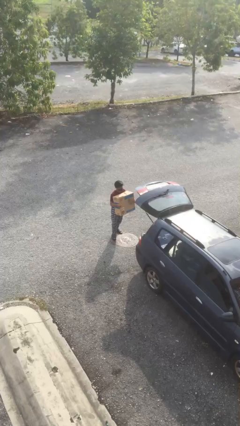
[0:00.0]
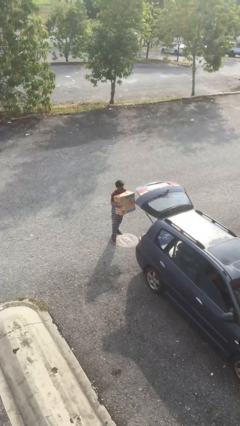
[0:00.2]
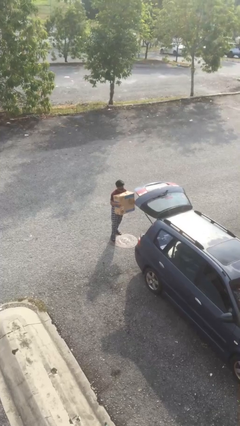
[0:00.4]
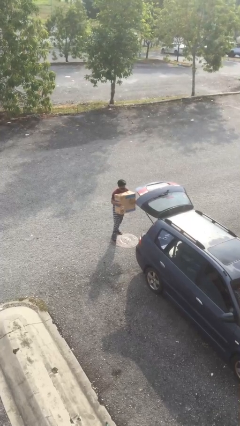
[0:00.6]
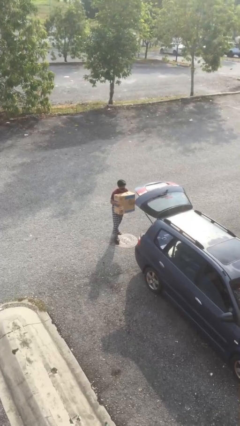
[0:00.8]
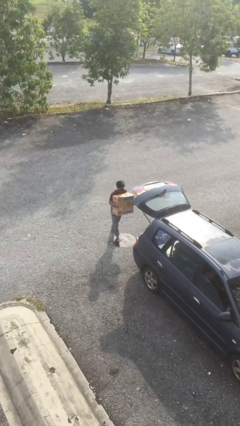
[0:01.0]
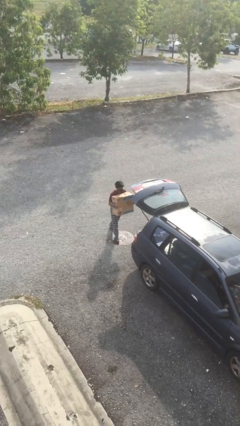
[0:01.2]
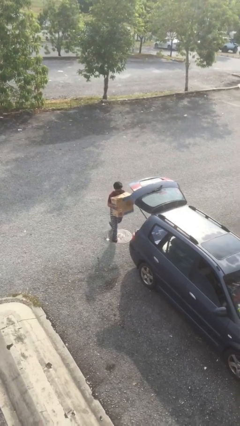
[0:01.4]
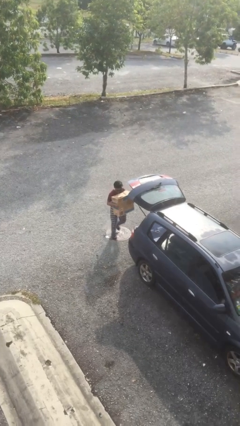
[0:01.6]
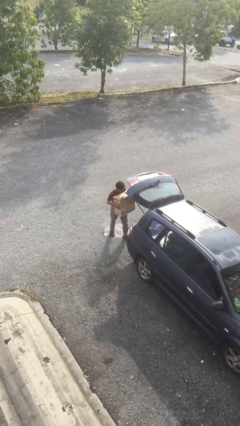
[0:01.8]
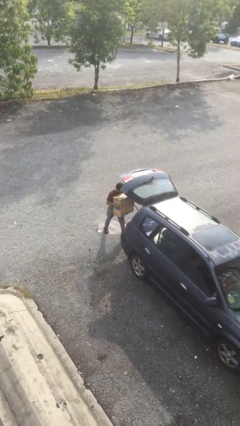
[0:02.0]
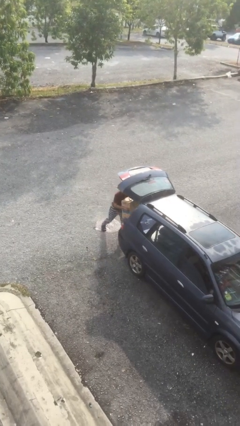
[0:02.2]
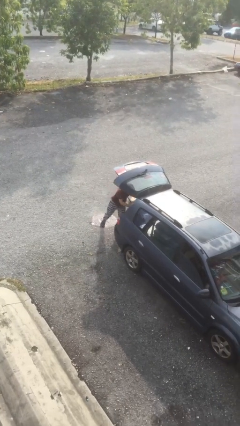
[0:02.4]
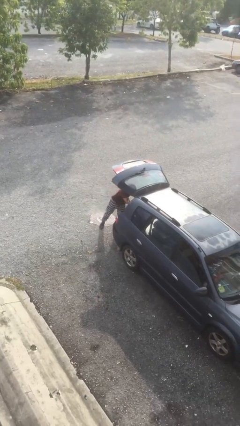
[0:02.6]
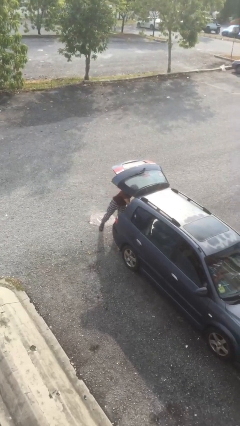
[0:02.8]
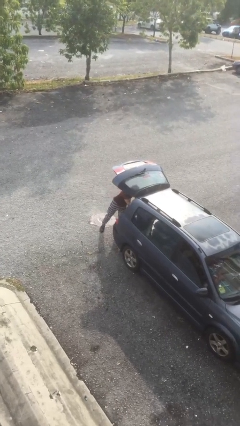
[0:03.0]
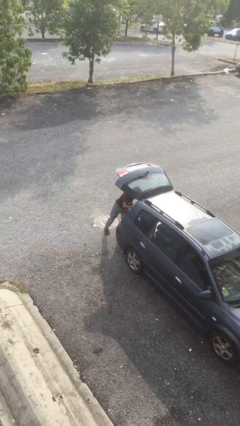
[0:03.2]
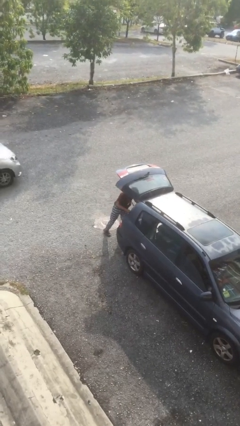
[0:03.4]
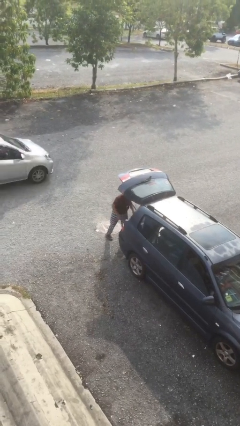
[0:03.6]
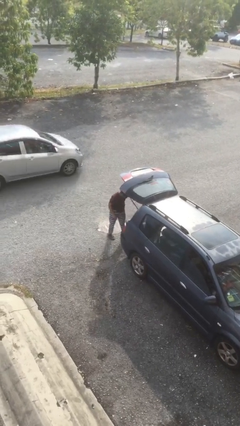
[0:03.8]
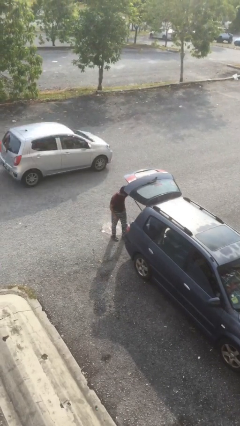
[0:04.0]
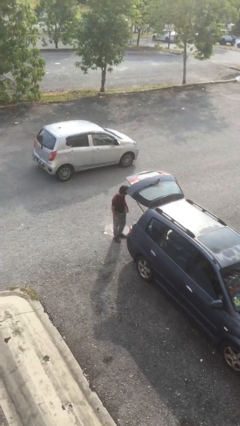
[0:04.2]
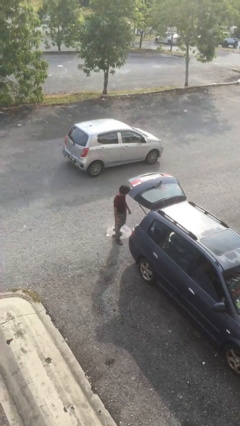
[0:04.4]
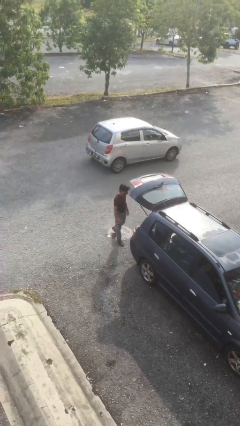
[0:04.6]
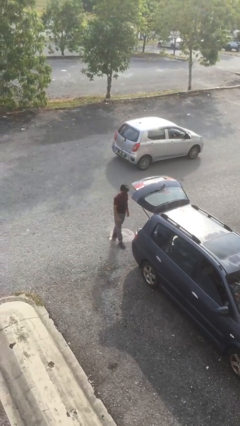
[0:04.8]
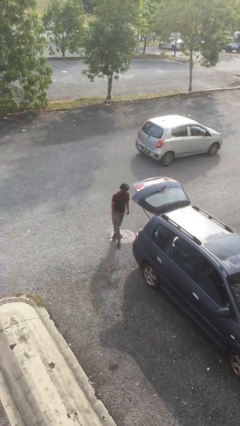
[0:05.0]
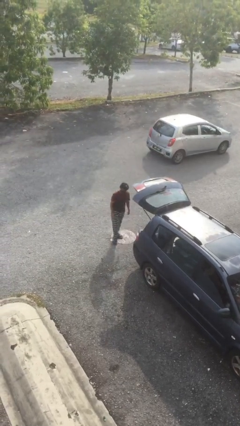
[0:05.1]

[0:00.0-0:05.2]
person loads car

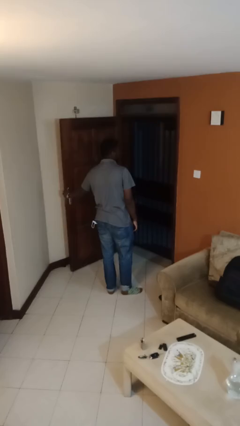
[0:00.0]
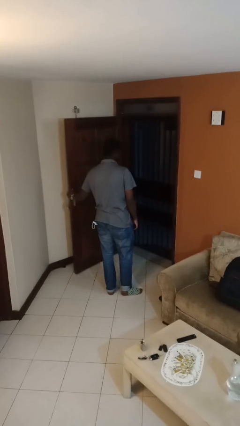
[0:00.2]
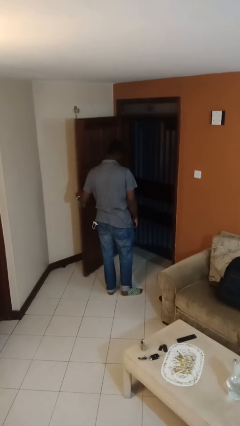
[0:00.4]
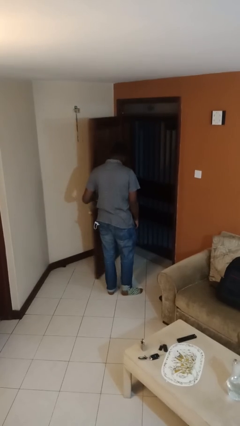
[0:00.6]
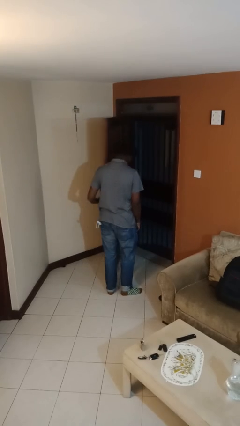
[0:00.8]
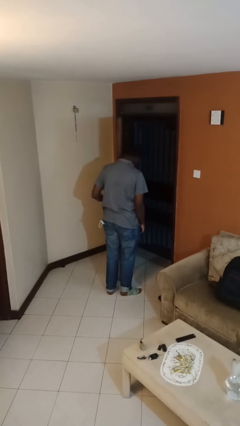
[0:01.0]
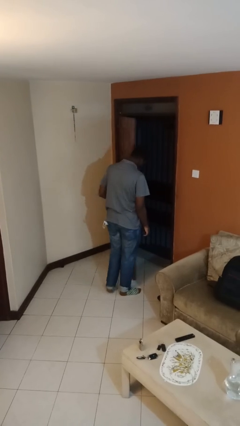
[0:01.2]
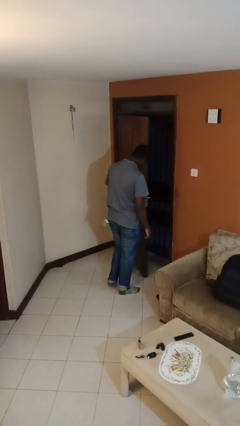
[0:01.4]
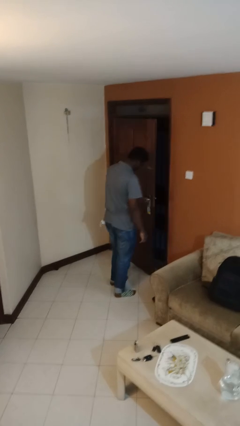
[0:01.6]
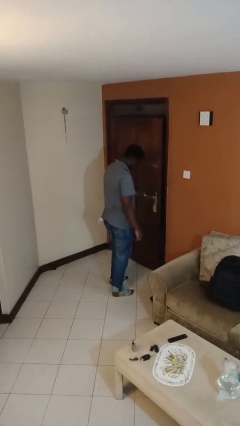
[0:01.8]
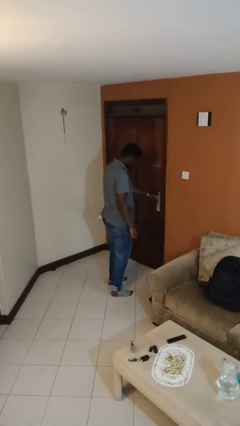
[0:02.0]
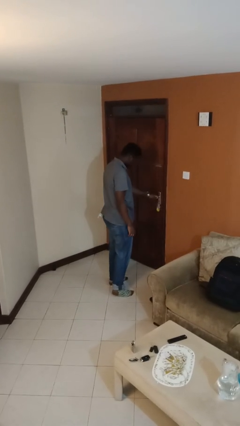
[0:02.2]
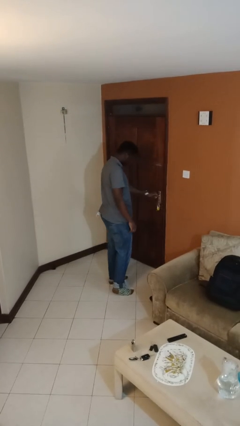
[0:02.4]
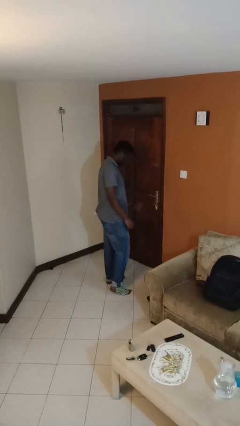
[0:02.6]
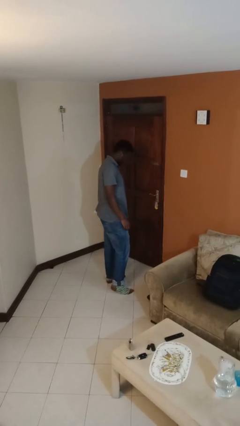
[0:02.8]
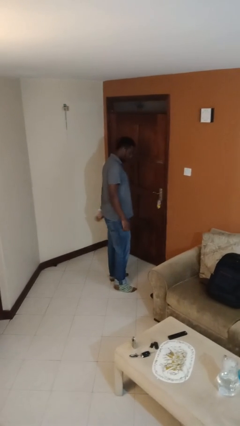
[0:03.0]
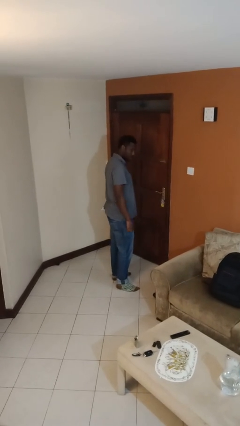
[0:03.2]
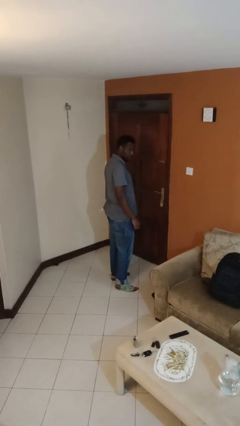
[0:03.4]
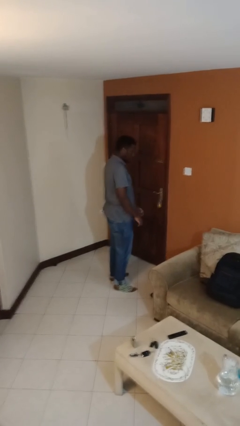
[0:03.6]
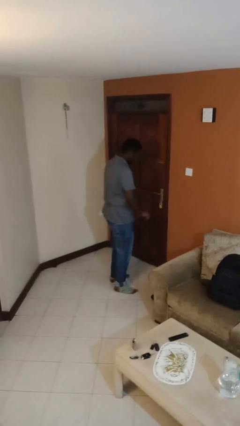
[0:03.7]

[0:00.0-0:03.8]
person closes facility door

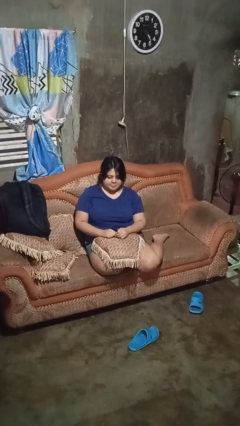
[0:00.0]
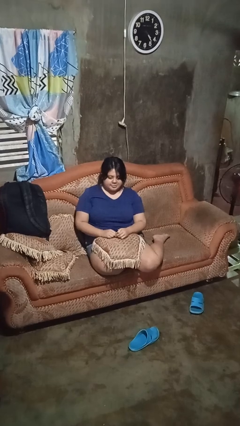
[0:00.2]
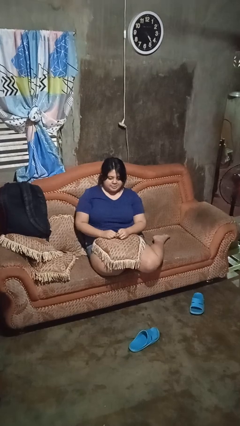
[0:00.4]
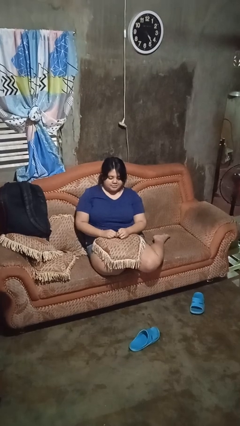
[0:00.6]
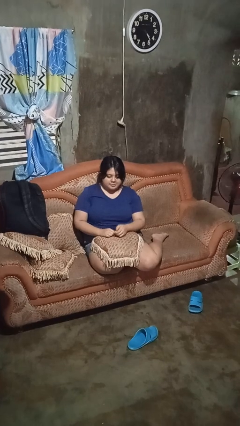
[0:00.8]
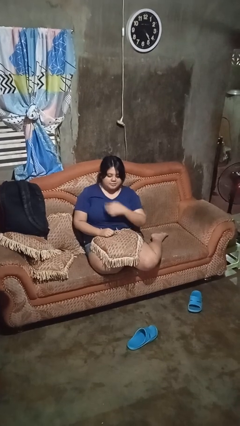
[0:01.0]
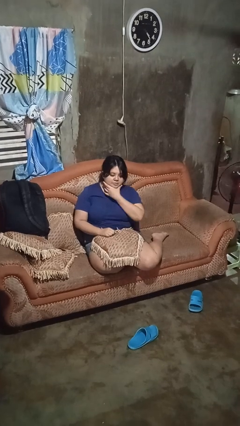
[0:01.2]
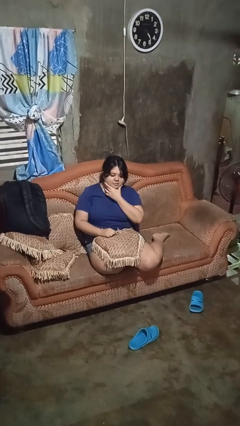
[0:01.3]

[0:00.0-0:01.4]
person strokes chin

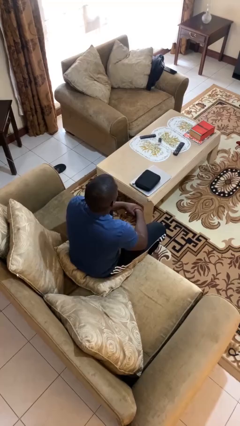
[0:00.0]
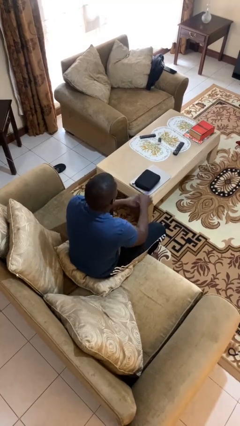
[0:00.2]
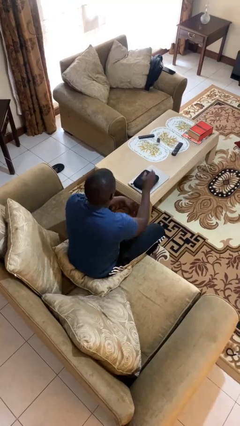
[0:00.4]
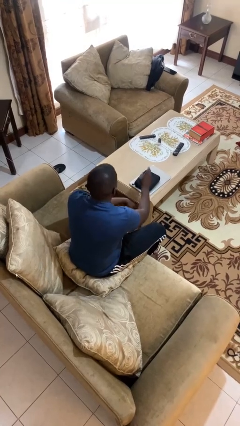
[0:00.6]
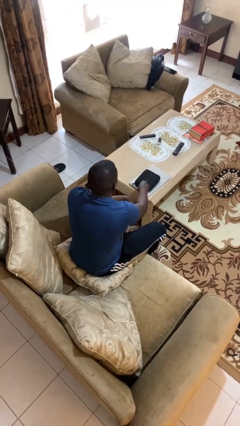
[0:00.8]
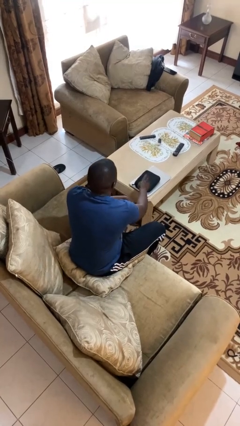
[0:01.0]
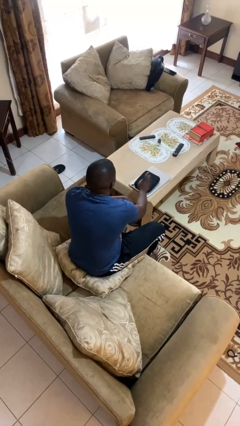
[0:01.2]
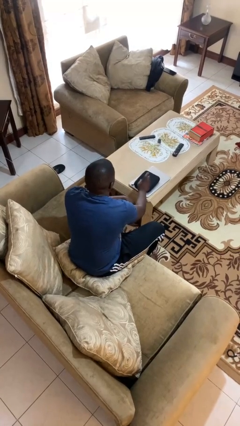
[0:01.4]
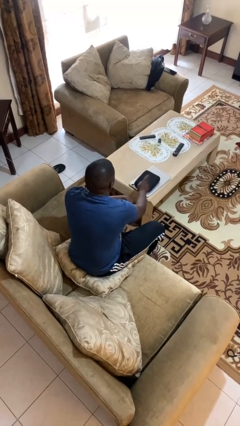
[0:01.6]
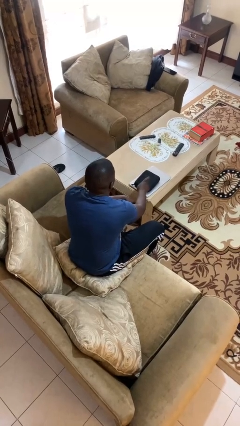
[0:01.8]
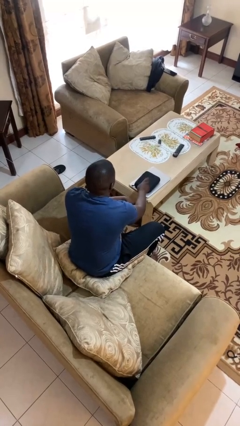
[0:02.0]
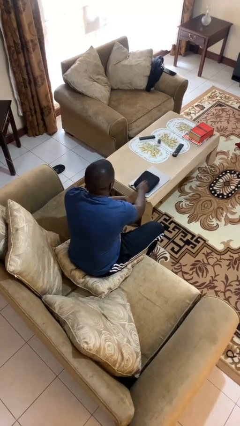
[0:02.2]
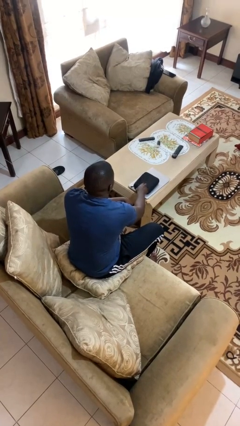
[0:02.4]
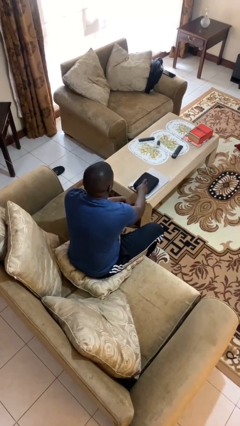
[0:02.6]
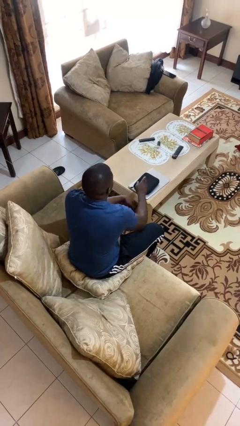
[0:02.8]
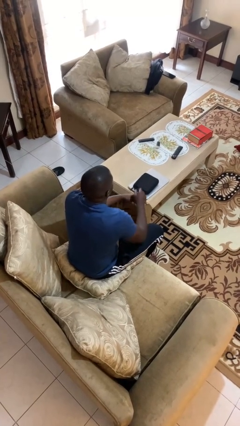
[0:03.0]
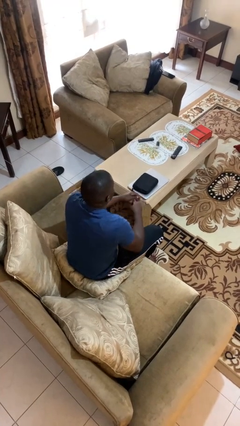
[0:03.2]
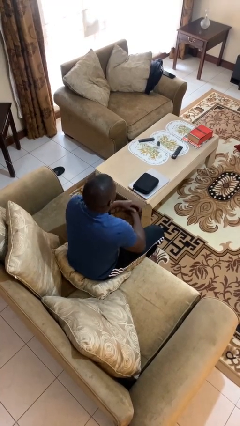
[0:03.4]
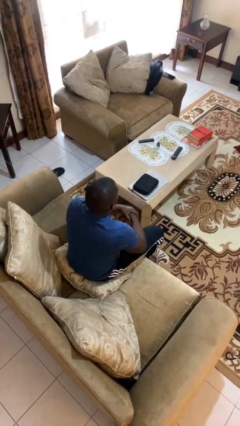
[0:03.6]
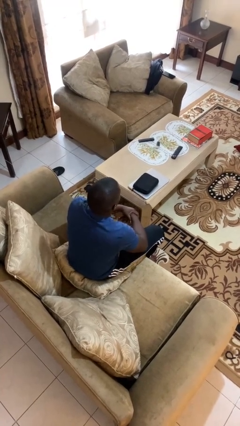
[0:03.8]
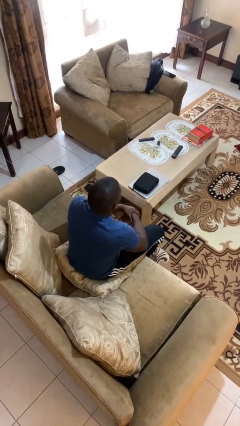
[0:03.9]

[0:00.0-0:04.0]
person taps object with finger

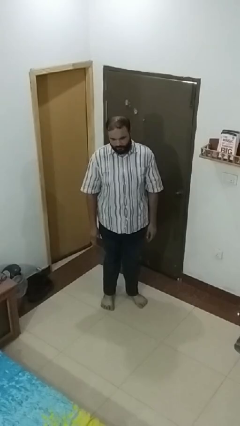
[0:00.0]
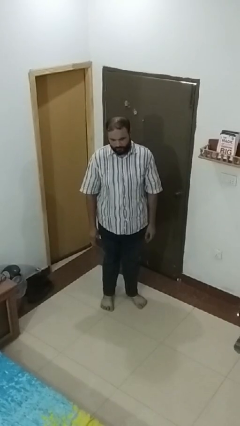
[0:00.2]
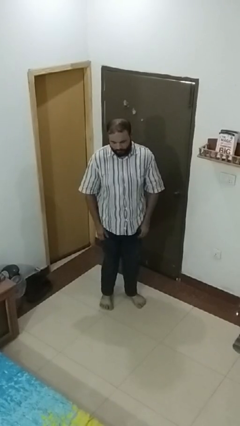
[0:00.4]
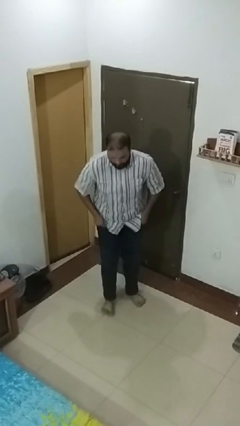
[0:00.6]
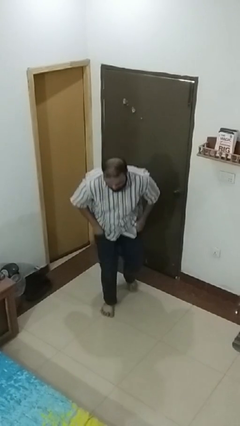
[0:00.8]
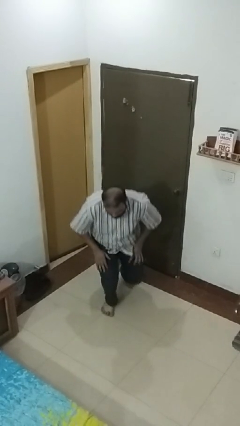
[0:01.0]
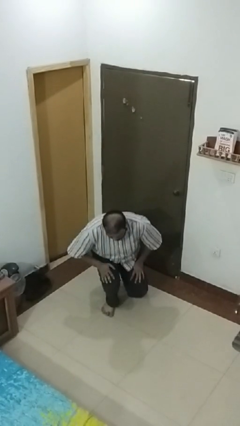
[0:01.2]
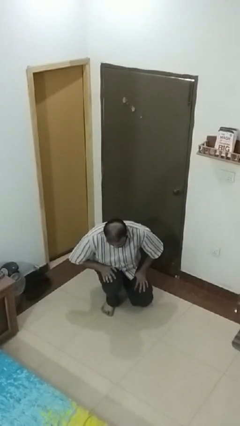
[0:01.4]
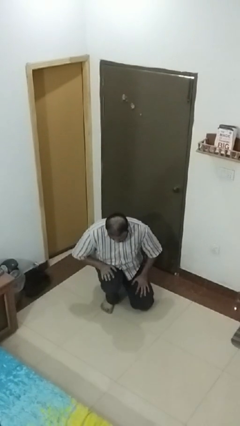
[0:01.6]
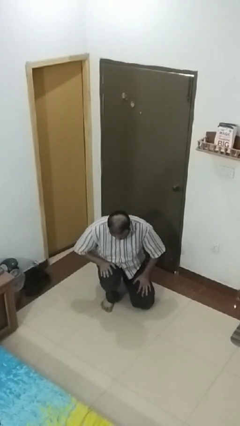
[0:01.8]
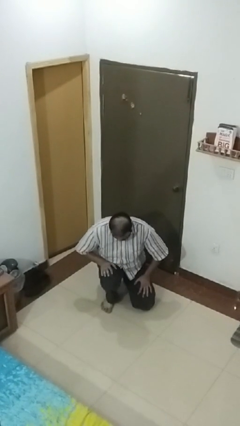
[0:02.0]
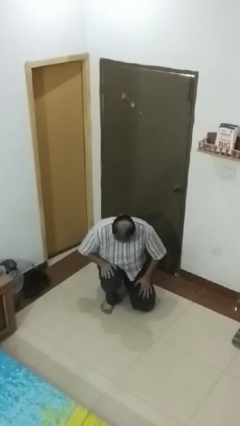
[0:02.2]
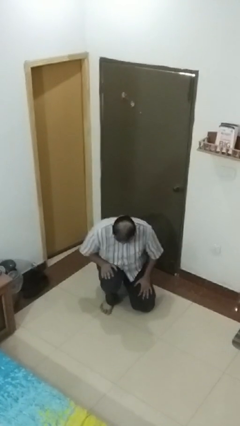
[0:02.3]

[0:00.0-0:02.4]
person kneels

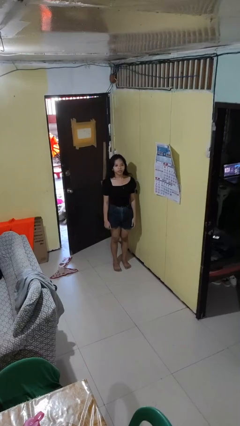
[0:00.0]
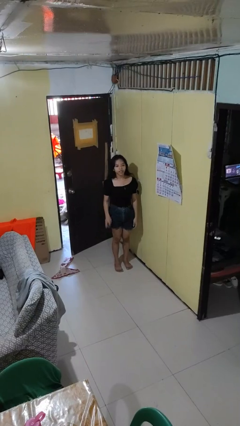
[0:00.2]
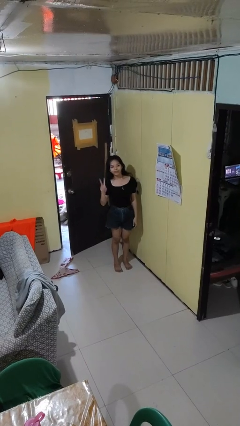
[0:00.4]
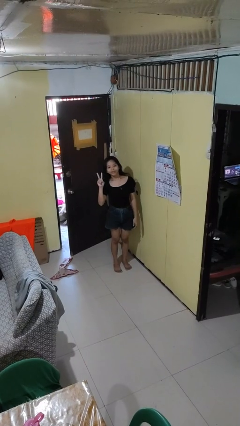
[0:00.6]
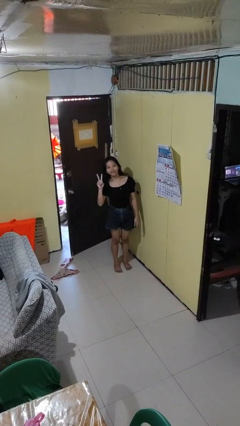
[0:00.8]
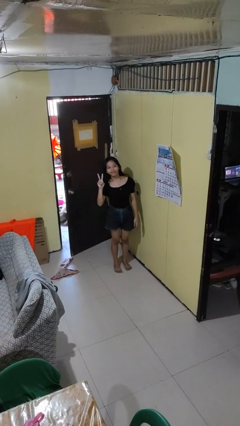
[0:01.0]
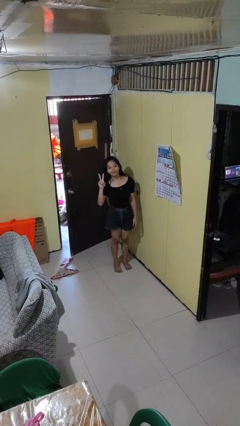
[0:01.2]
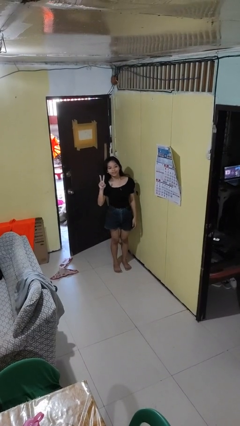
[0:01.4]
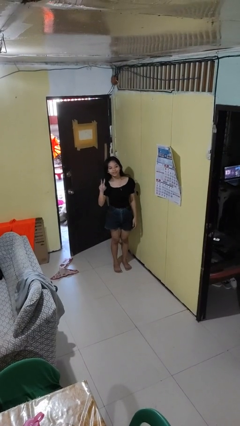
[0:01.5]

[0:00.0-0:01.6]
person gestures peace
